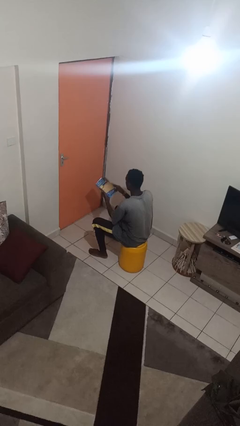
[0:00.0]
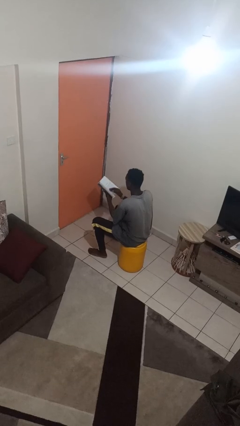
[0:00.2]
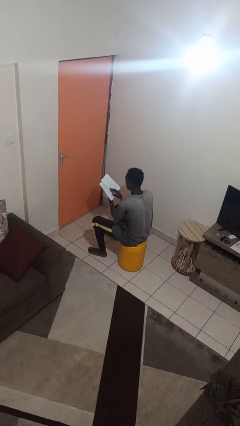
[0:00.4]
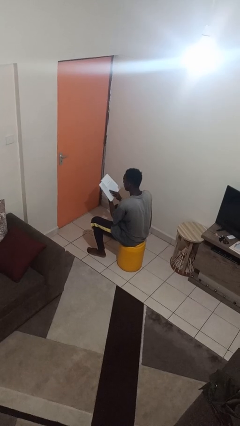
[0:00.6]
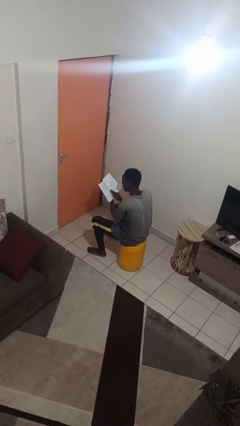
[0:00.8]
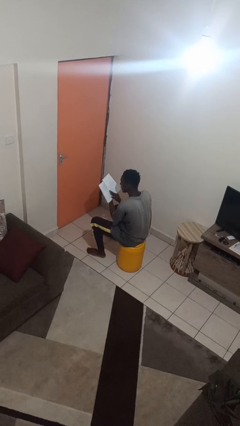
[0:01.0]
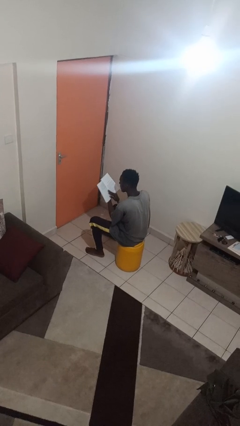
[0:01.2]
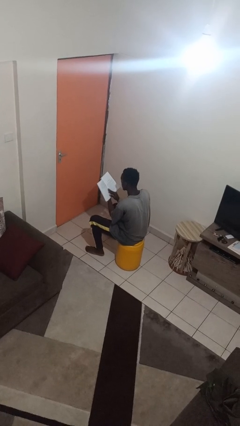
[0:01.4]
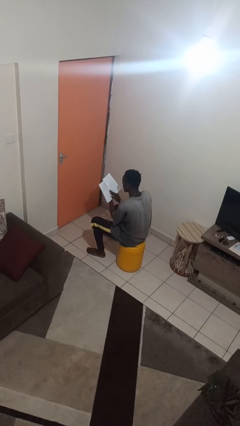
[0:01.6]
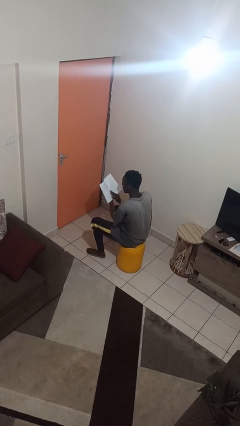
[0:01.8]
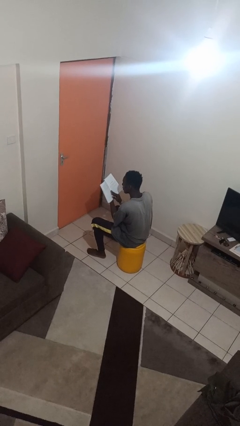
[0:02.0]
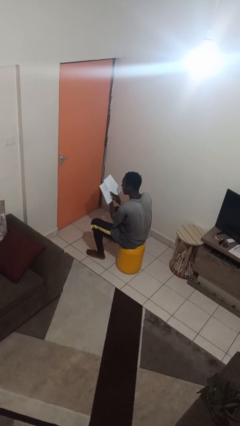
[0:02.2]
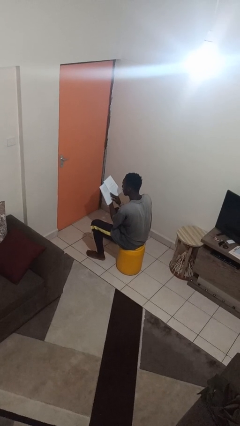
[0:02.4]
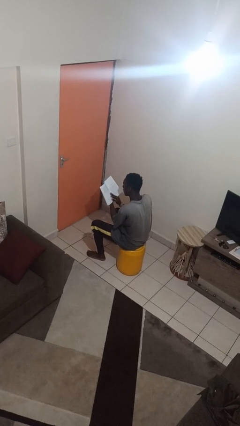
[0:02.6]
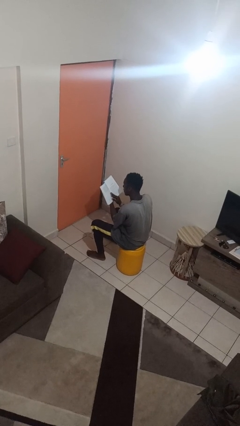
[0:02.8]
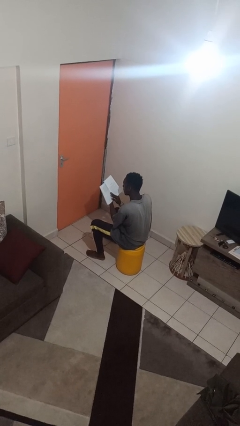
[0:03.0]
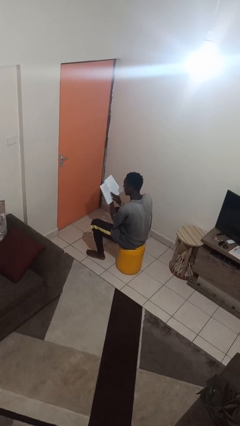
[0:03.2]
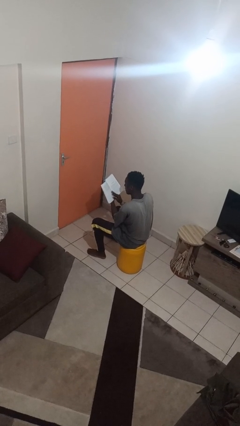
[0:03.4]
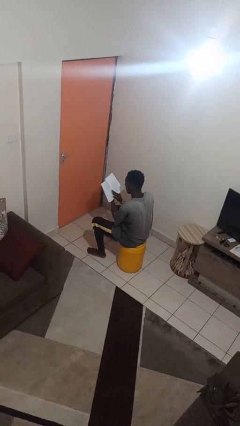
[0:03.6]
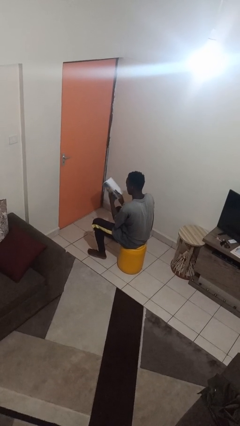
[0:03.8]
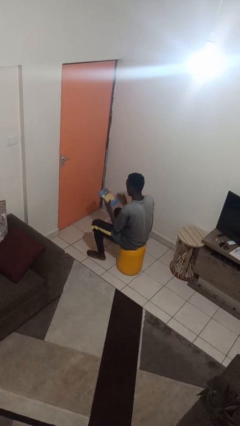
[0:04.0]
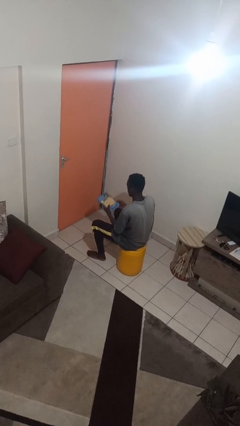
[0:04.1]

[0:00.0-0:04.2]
person reads book

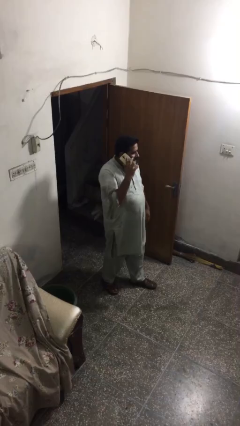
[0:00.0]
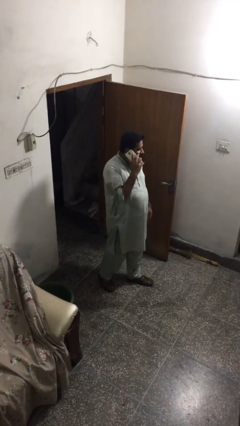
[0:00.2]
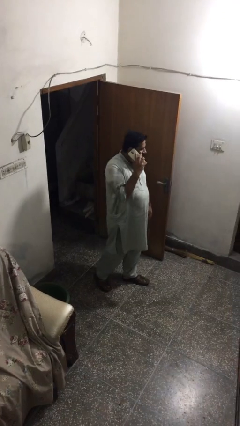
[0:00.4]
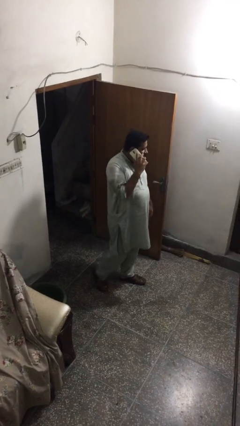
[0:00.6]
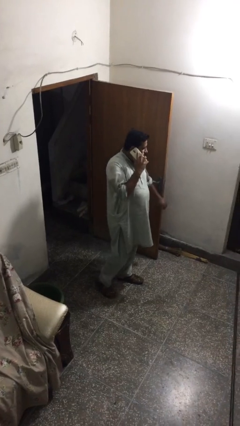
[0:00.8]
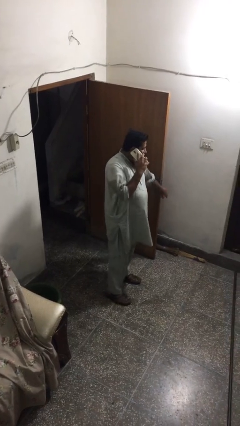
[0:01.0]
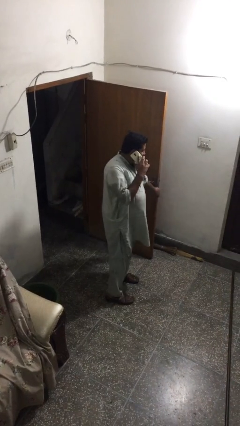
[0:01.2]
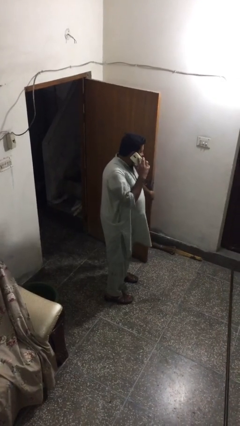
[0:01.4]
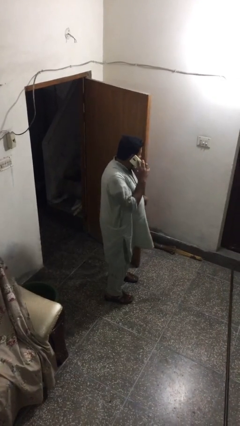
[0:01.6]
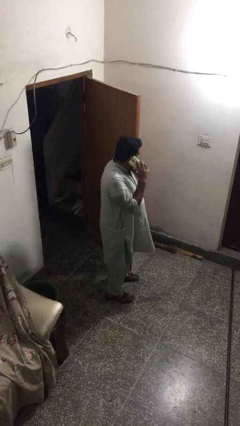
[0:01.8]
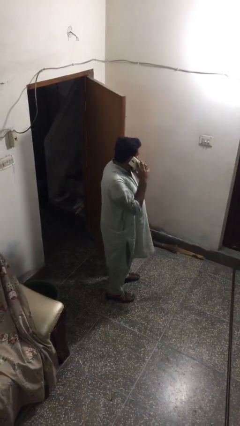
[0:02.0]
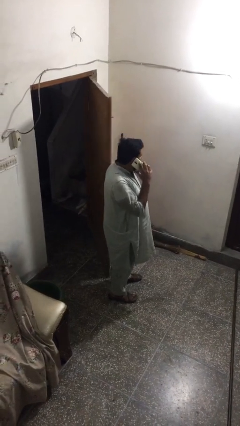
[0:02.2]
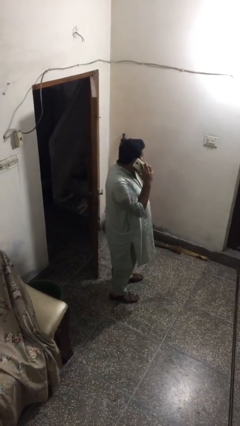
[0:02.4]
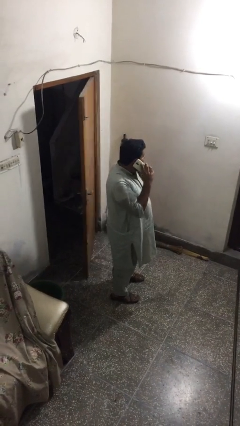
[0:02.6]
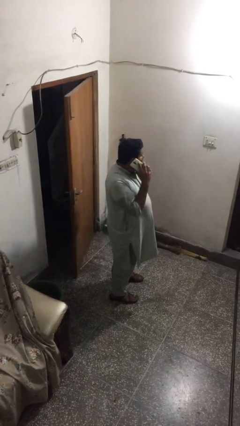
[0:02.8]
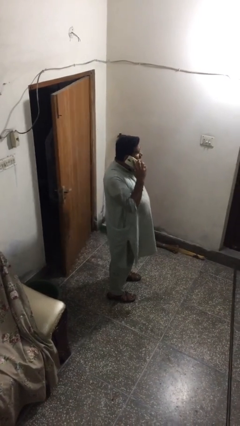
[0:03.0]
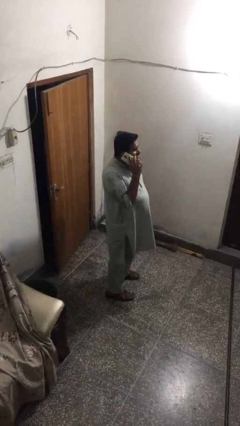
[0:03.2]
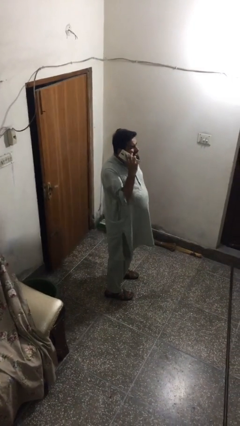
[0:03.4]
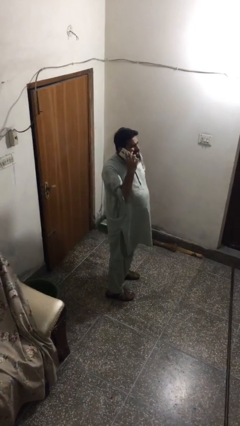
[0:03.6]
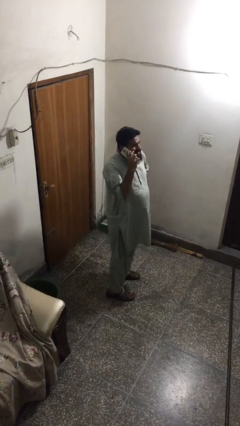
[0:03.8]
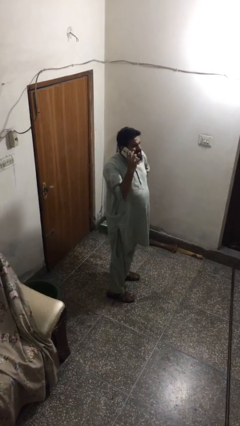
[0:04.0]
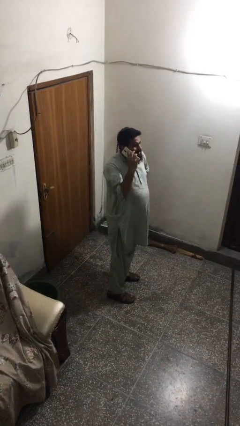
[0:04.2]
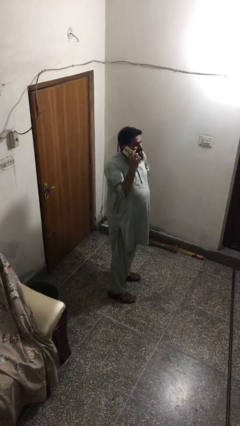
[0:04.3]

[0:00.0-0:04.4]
person closes facility door

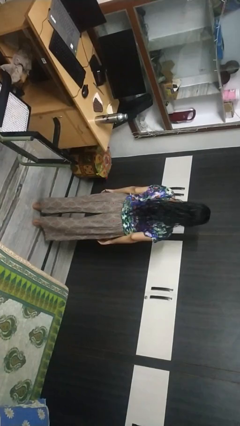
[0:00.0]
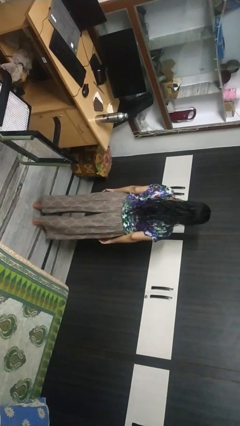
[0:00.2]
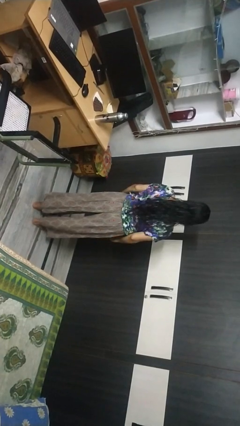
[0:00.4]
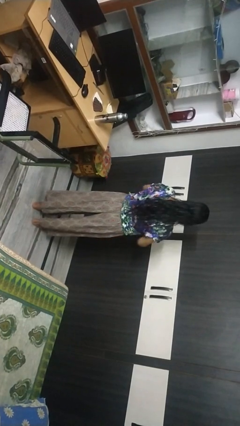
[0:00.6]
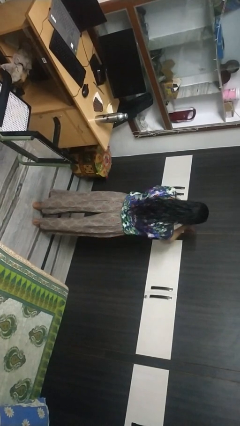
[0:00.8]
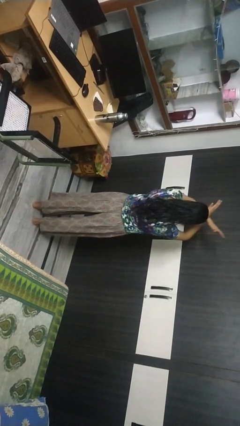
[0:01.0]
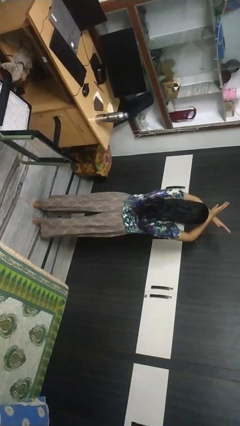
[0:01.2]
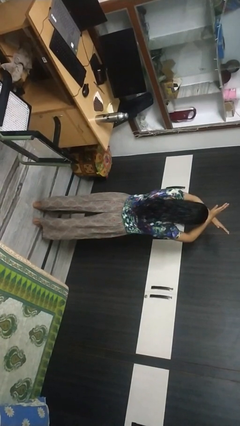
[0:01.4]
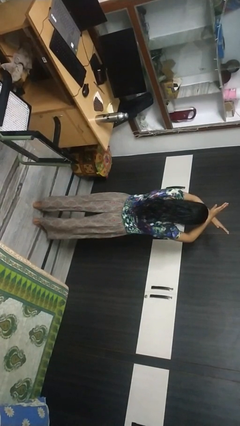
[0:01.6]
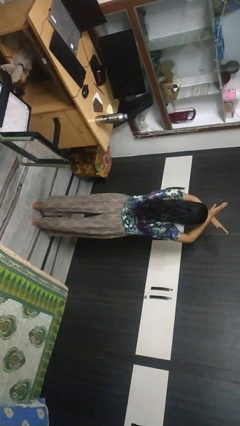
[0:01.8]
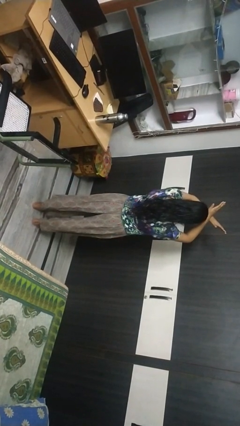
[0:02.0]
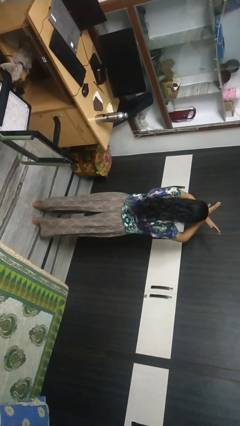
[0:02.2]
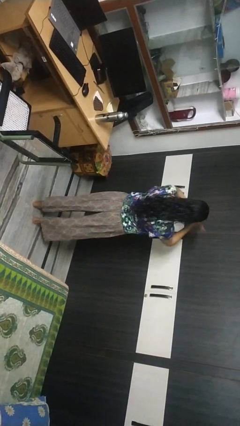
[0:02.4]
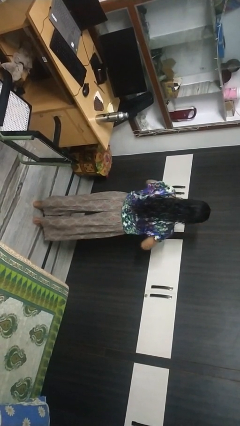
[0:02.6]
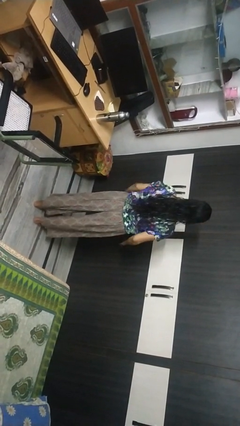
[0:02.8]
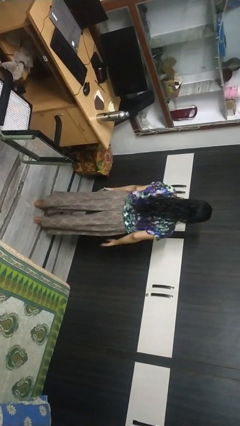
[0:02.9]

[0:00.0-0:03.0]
person gestures arms x

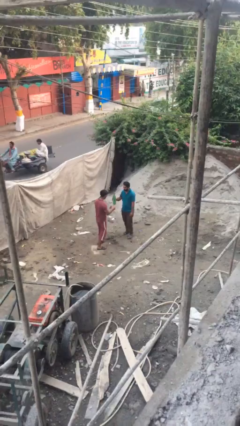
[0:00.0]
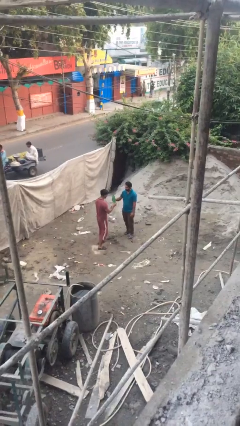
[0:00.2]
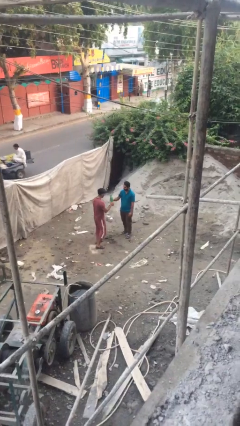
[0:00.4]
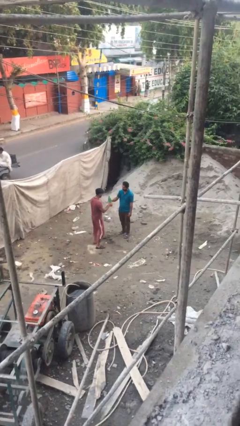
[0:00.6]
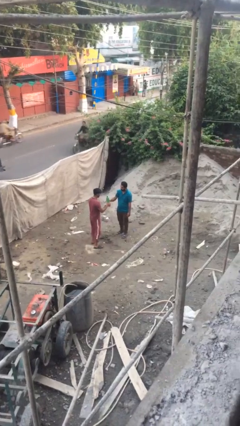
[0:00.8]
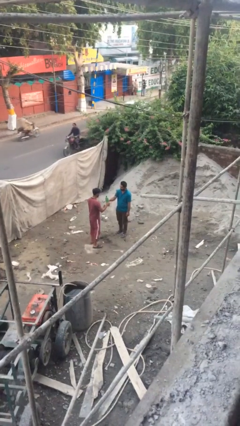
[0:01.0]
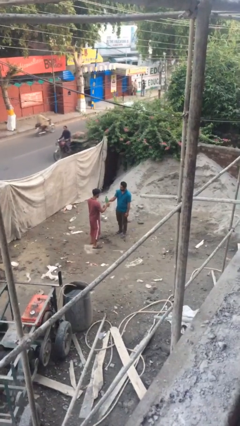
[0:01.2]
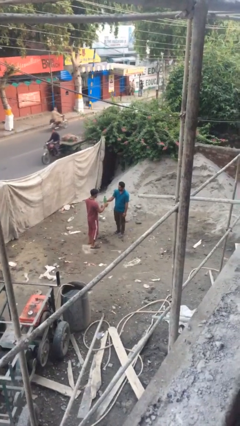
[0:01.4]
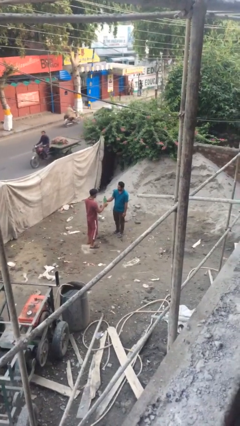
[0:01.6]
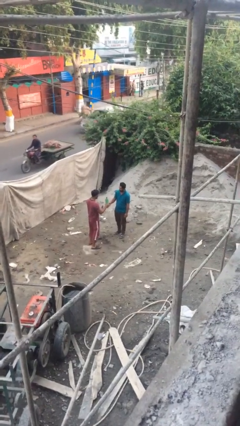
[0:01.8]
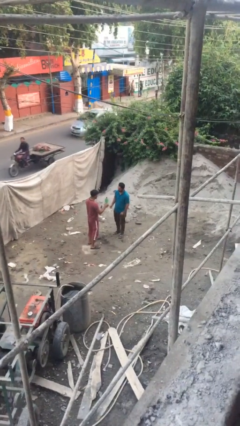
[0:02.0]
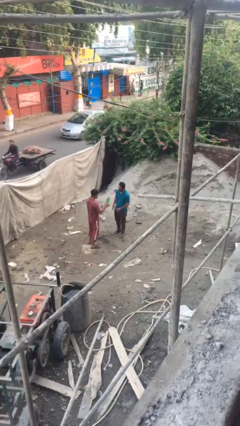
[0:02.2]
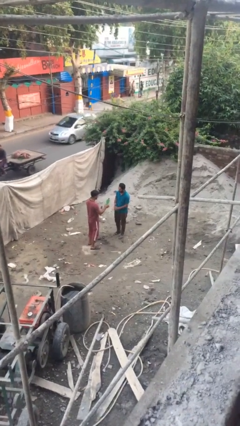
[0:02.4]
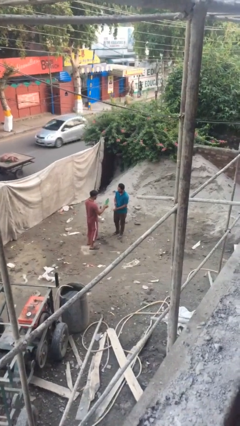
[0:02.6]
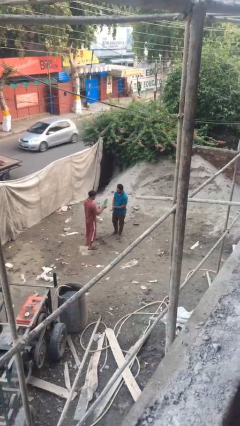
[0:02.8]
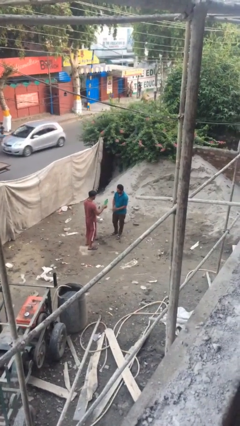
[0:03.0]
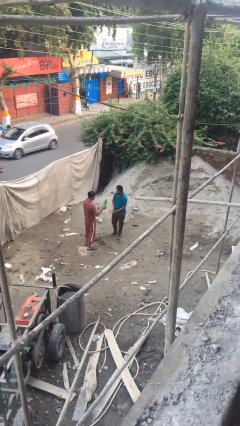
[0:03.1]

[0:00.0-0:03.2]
person transfers object to person

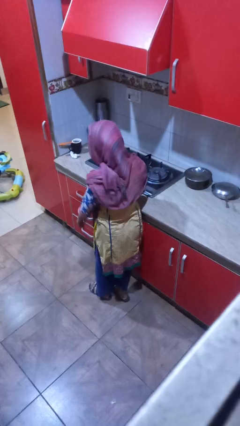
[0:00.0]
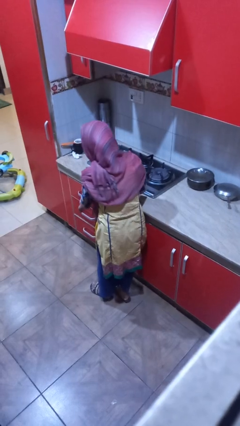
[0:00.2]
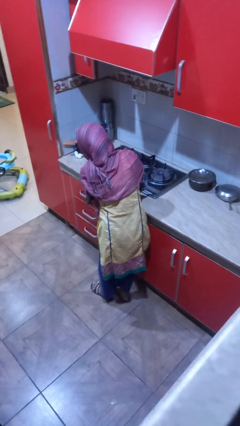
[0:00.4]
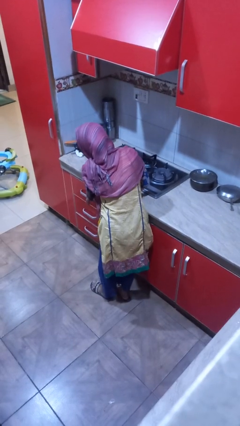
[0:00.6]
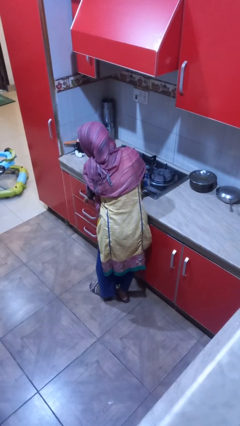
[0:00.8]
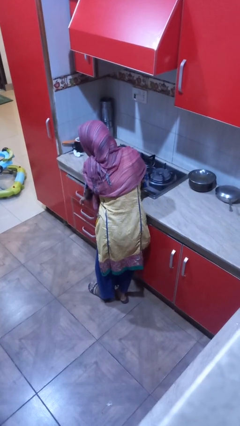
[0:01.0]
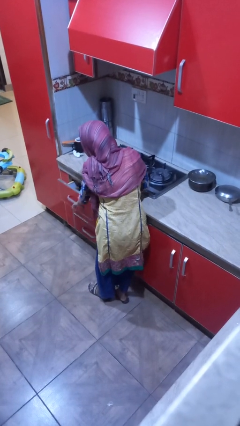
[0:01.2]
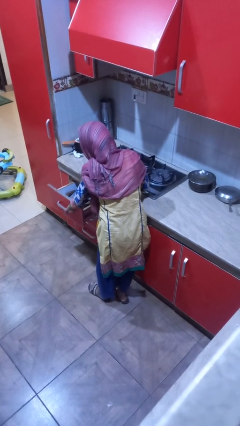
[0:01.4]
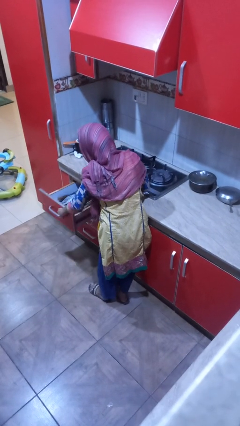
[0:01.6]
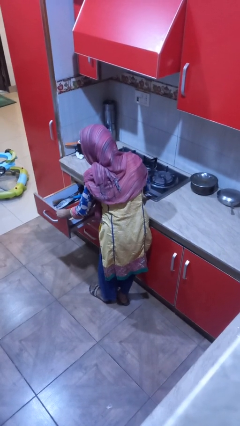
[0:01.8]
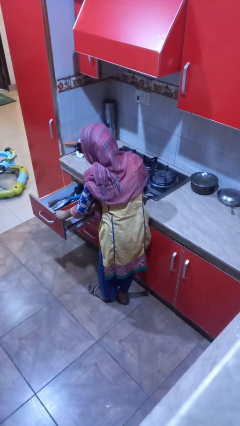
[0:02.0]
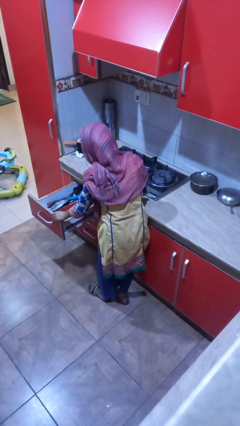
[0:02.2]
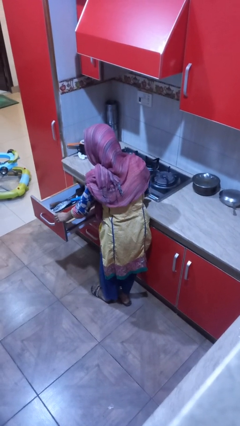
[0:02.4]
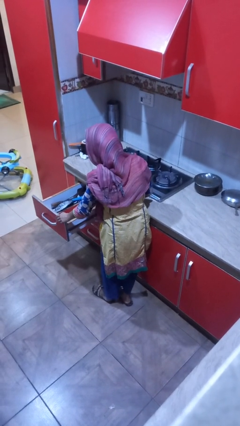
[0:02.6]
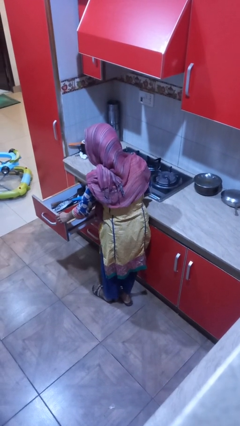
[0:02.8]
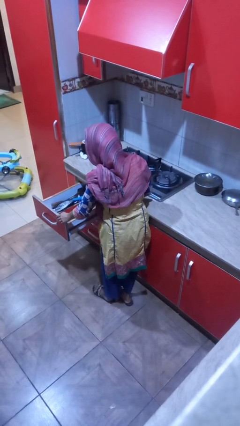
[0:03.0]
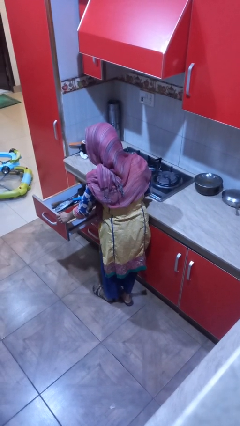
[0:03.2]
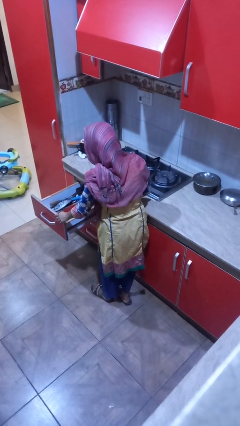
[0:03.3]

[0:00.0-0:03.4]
person opens kitchen drawer
